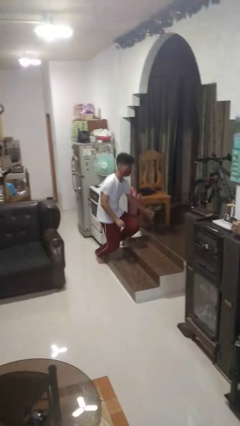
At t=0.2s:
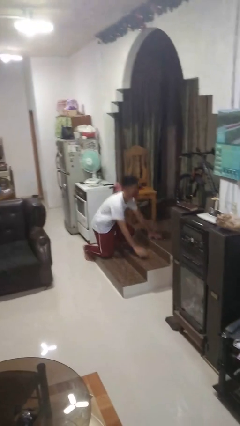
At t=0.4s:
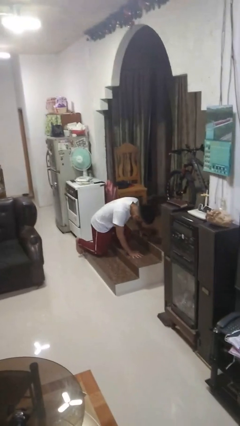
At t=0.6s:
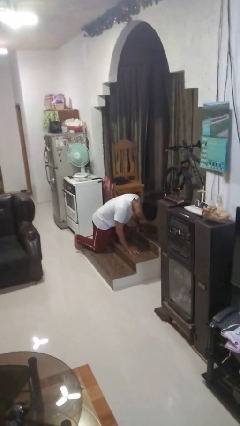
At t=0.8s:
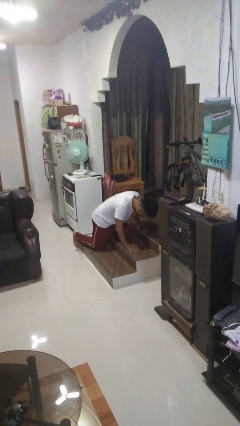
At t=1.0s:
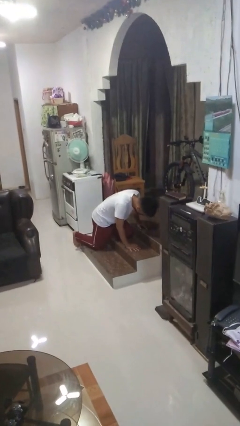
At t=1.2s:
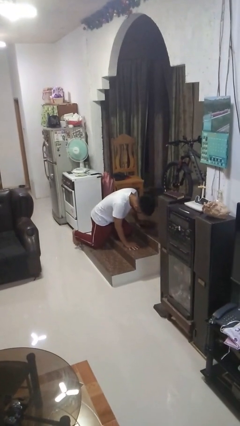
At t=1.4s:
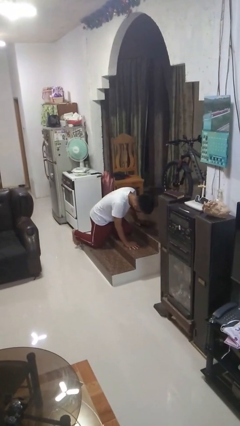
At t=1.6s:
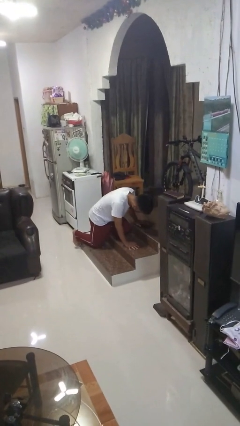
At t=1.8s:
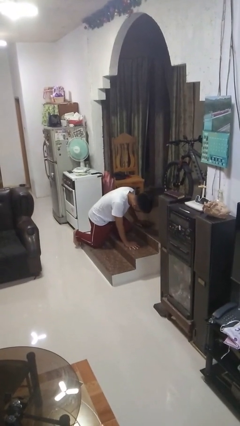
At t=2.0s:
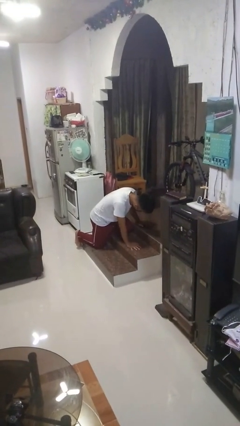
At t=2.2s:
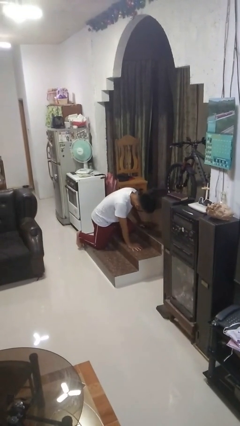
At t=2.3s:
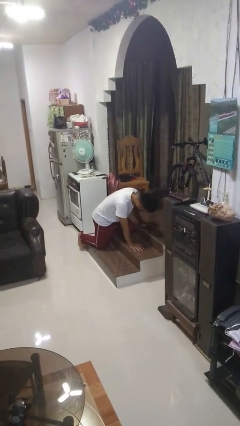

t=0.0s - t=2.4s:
person trips on object on floor

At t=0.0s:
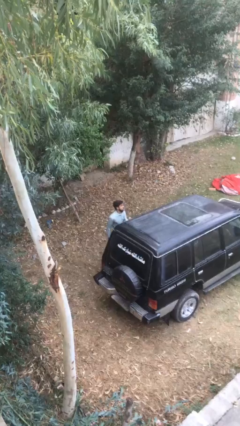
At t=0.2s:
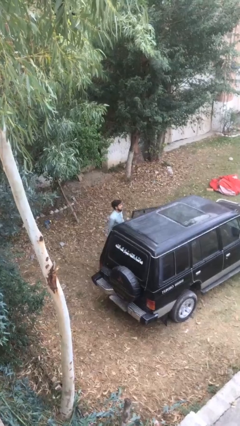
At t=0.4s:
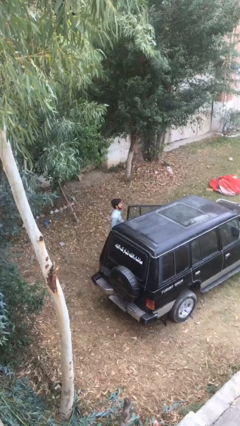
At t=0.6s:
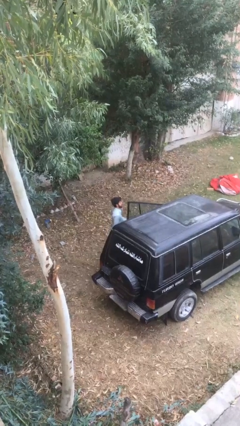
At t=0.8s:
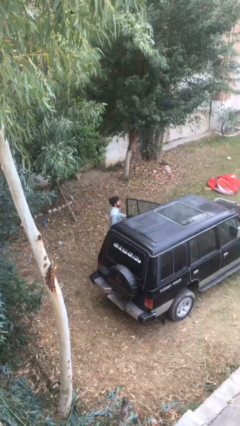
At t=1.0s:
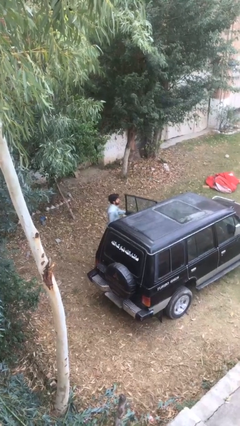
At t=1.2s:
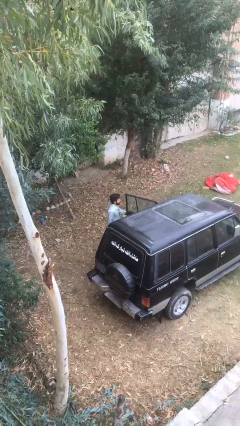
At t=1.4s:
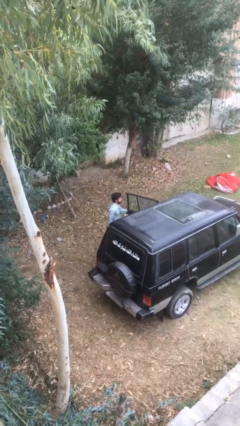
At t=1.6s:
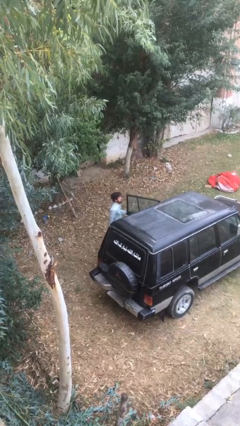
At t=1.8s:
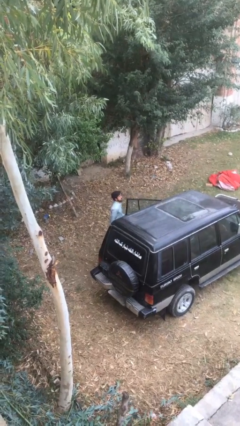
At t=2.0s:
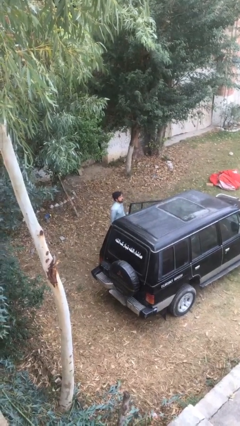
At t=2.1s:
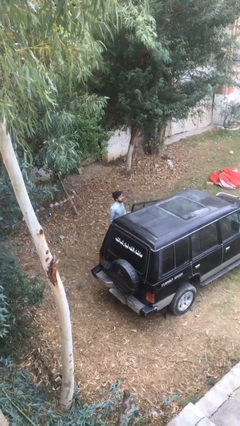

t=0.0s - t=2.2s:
person opens car door

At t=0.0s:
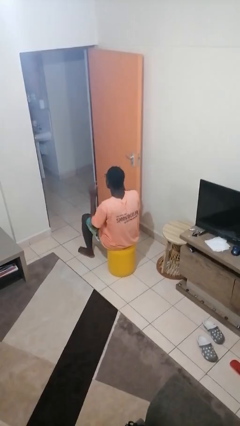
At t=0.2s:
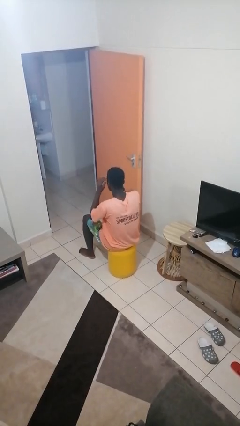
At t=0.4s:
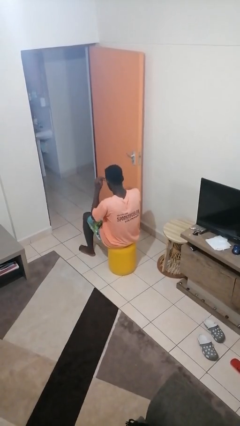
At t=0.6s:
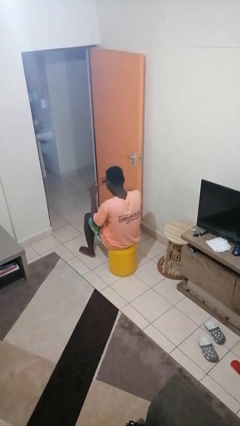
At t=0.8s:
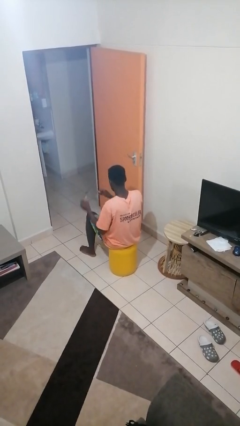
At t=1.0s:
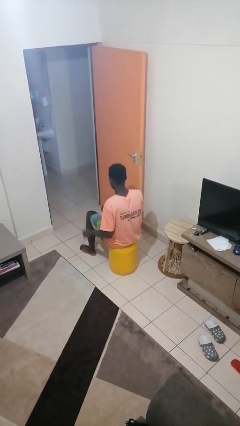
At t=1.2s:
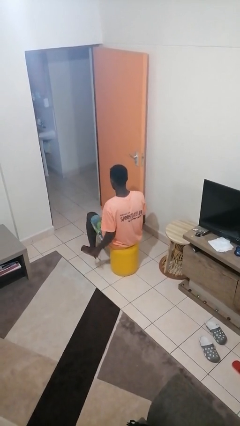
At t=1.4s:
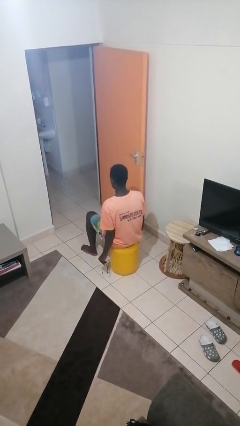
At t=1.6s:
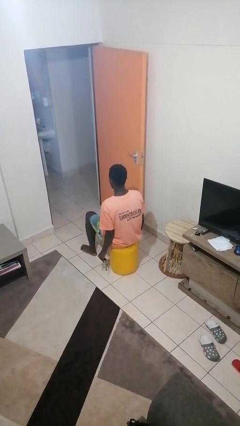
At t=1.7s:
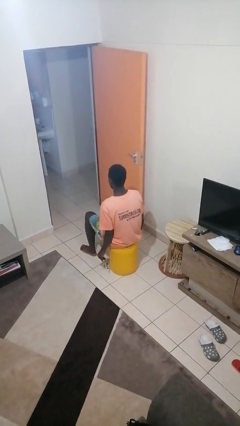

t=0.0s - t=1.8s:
person takes off glasses

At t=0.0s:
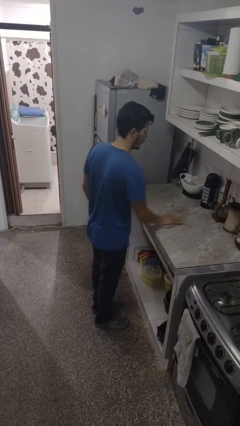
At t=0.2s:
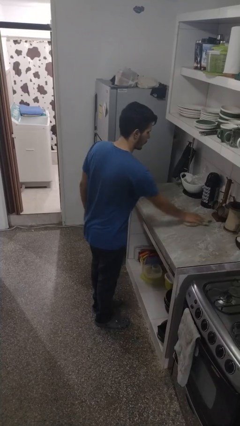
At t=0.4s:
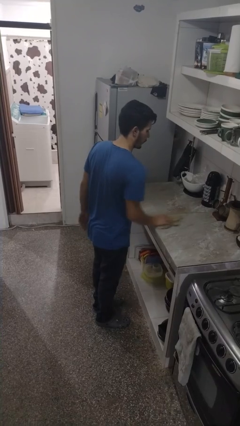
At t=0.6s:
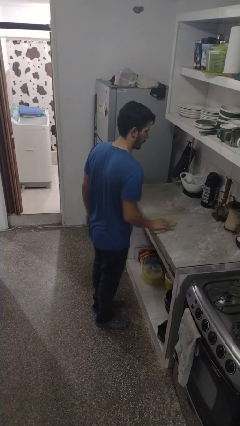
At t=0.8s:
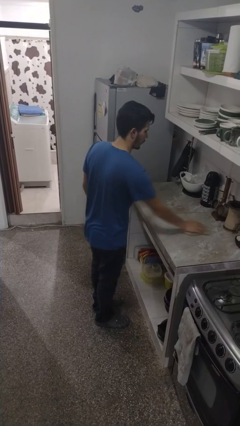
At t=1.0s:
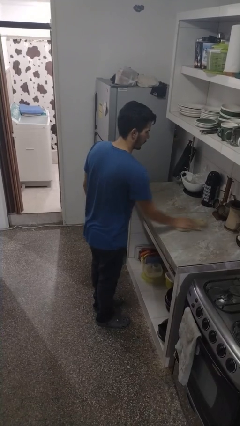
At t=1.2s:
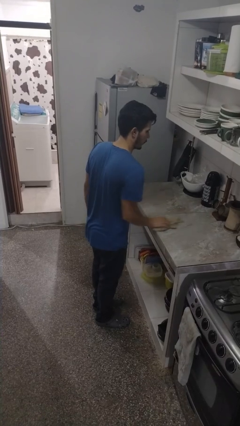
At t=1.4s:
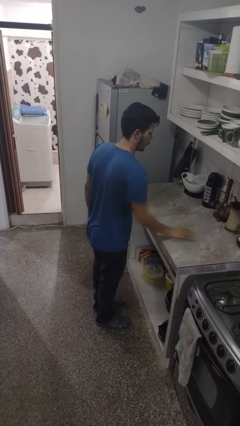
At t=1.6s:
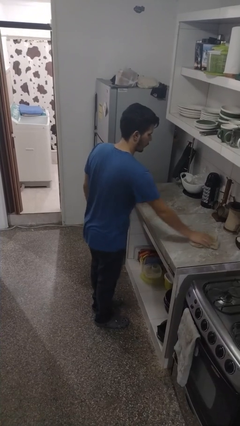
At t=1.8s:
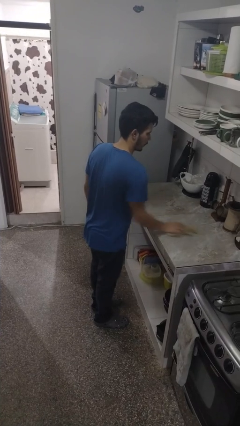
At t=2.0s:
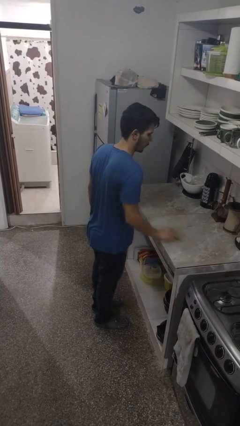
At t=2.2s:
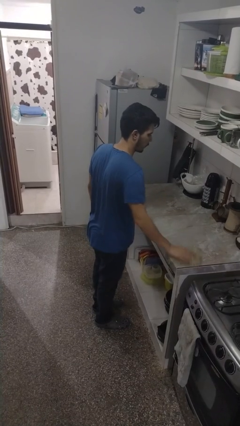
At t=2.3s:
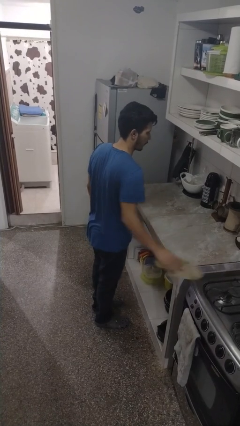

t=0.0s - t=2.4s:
person cleans table with rag

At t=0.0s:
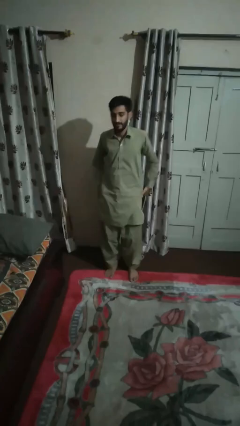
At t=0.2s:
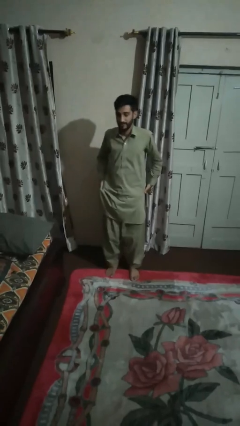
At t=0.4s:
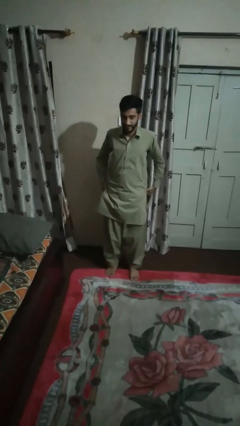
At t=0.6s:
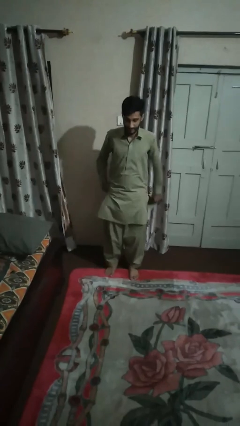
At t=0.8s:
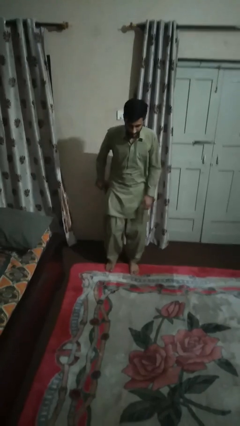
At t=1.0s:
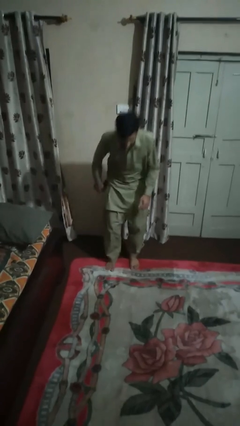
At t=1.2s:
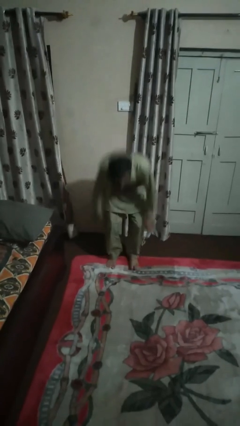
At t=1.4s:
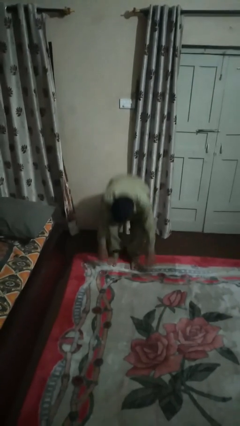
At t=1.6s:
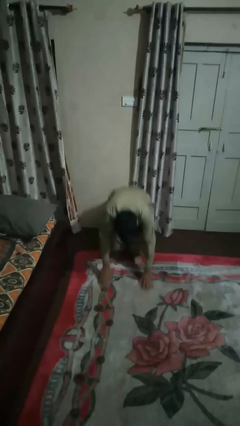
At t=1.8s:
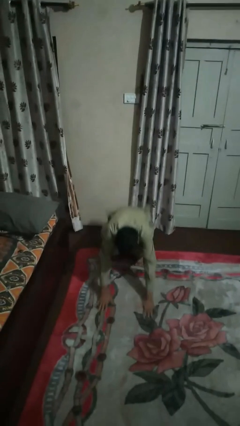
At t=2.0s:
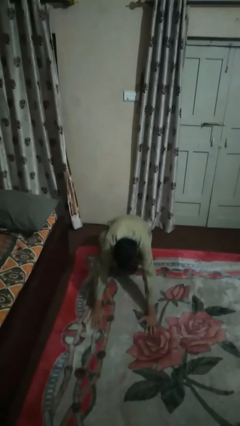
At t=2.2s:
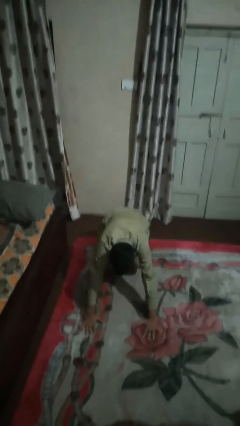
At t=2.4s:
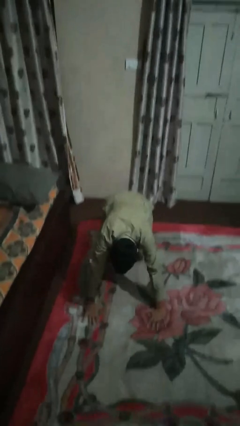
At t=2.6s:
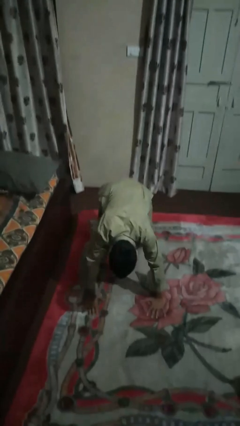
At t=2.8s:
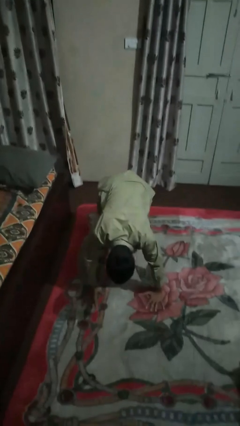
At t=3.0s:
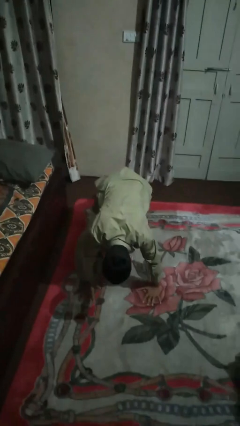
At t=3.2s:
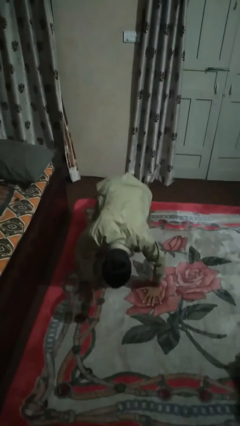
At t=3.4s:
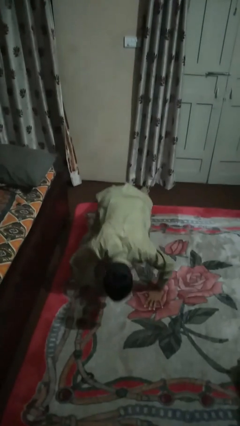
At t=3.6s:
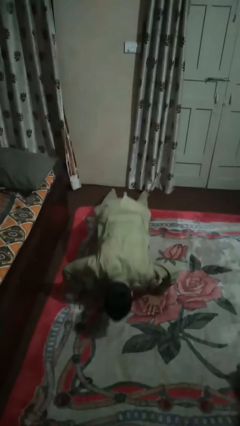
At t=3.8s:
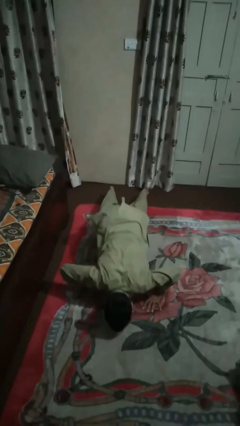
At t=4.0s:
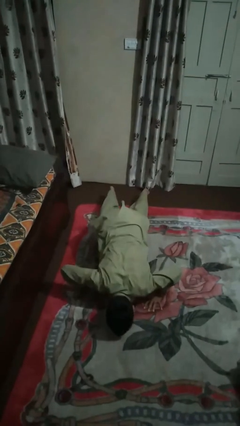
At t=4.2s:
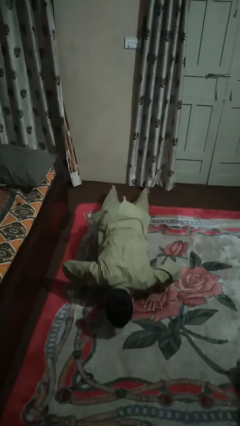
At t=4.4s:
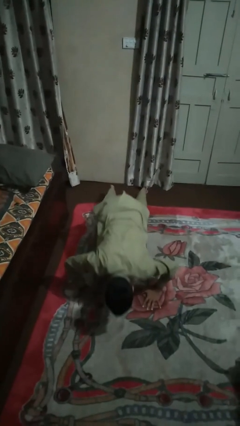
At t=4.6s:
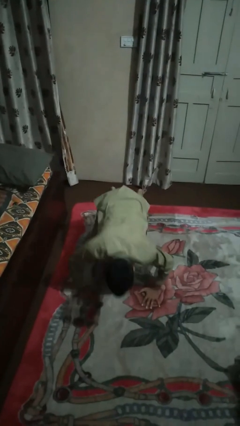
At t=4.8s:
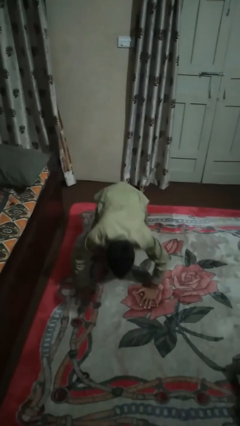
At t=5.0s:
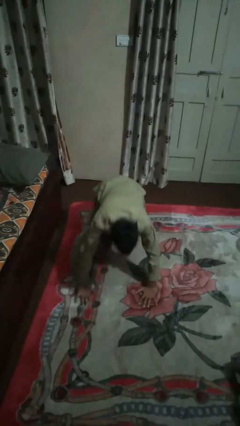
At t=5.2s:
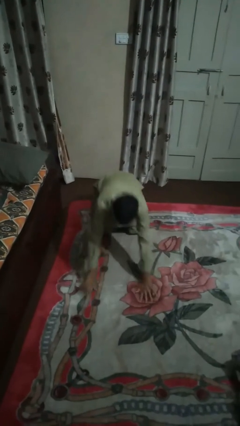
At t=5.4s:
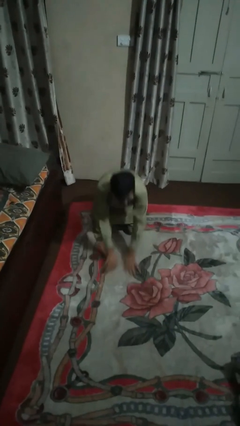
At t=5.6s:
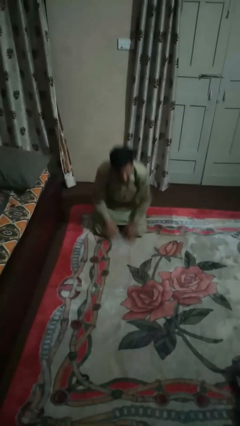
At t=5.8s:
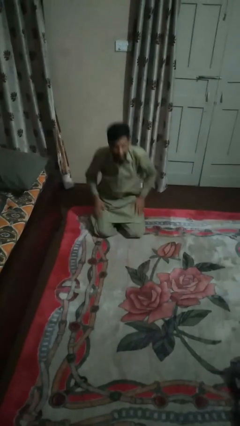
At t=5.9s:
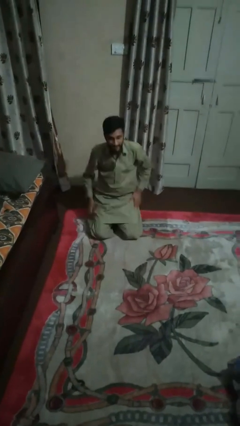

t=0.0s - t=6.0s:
person exercises with pushup

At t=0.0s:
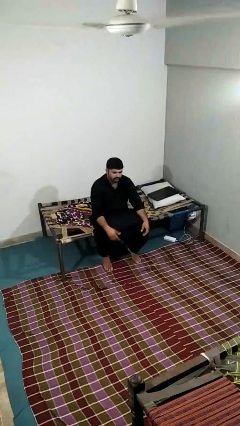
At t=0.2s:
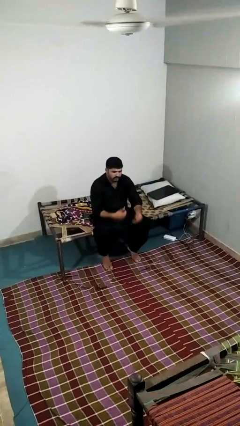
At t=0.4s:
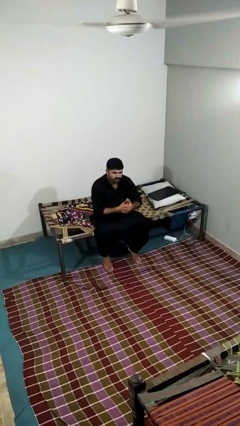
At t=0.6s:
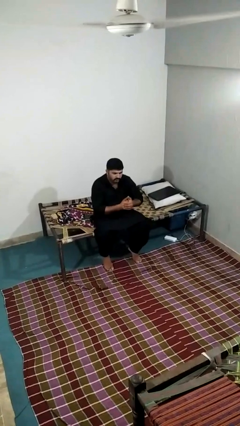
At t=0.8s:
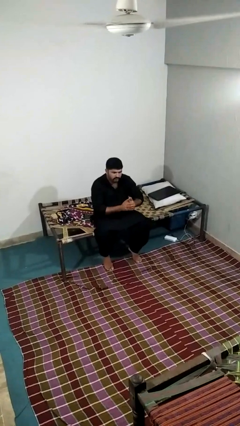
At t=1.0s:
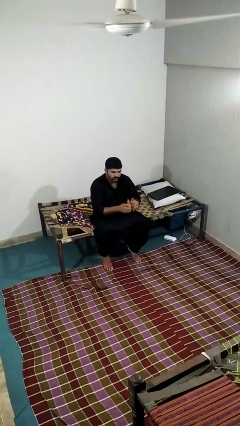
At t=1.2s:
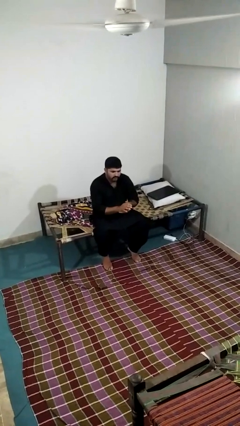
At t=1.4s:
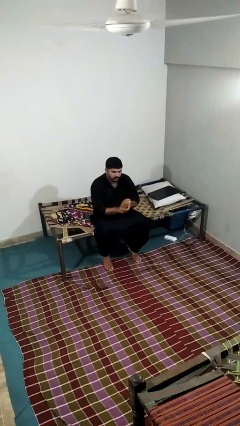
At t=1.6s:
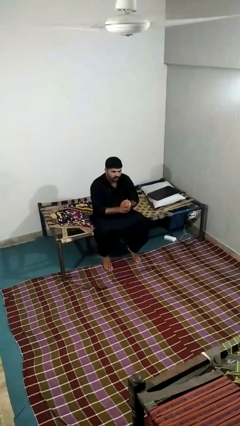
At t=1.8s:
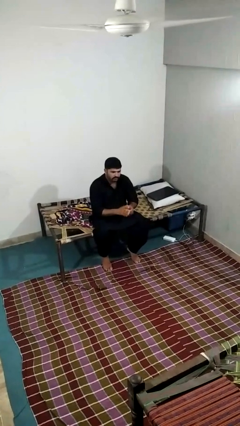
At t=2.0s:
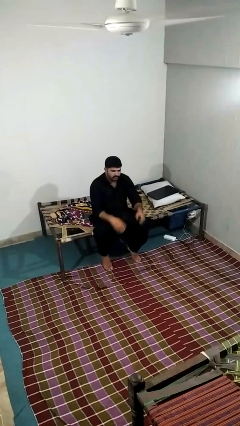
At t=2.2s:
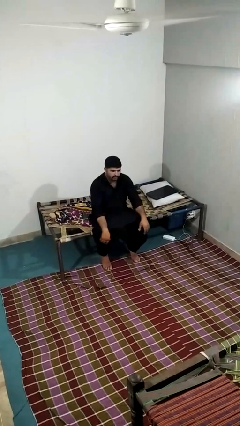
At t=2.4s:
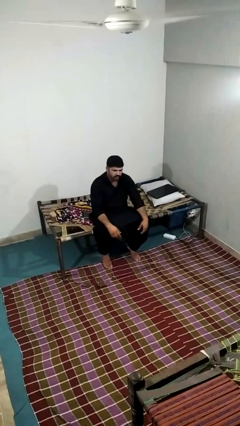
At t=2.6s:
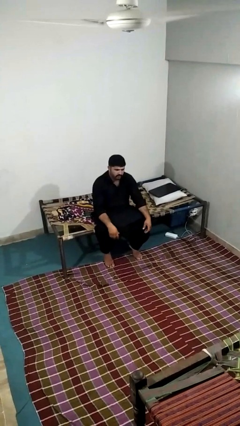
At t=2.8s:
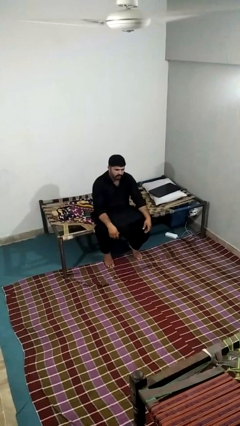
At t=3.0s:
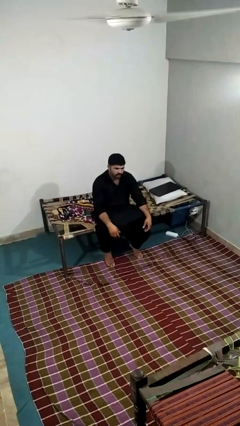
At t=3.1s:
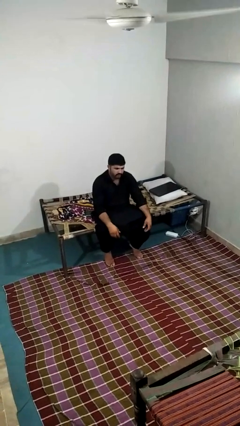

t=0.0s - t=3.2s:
person cracks knuckles
